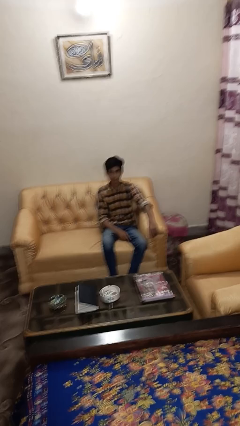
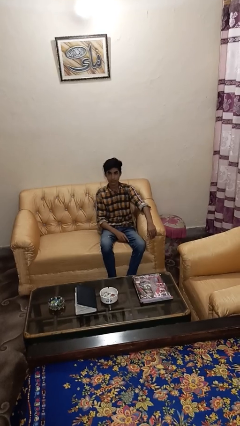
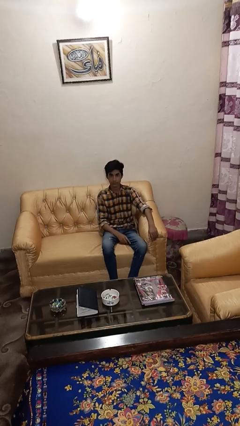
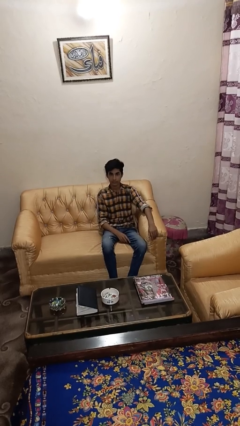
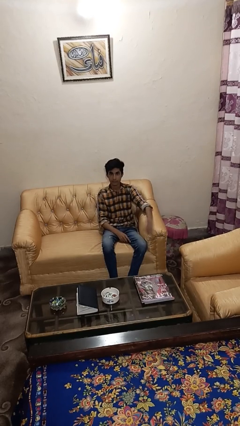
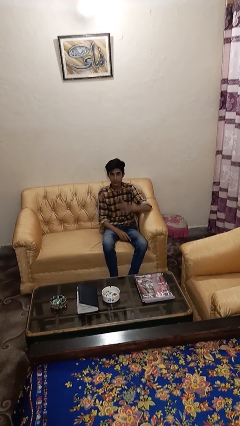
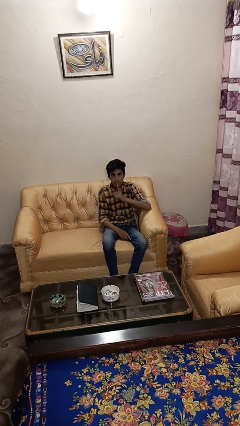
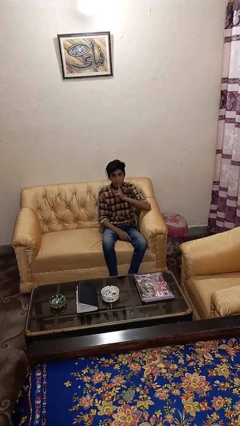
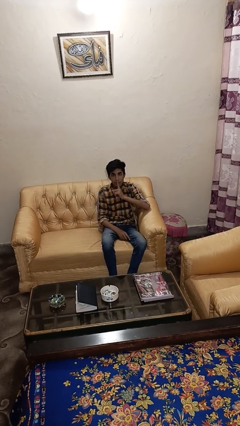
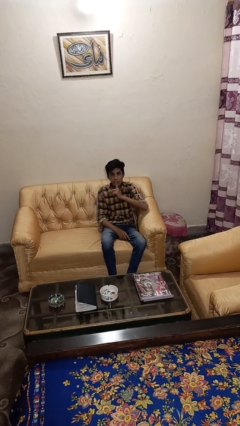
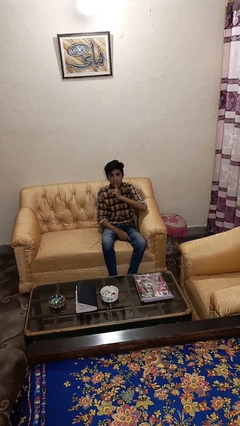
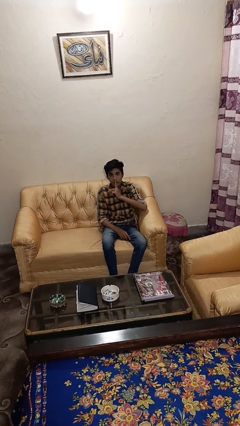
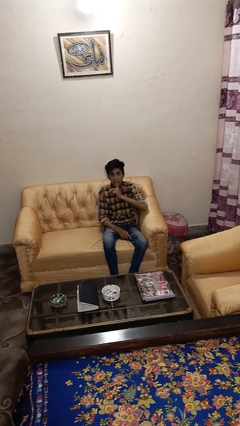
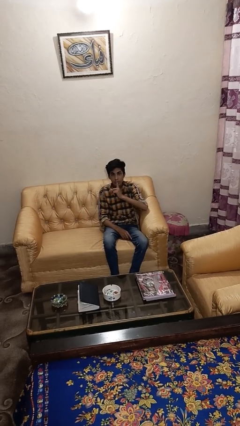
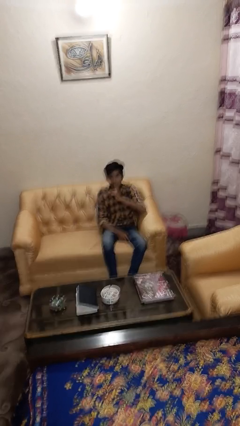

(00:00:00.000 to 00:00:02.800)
person gestures be quiet

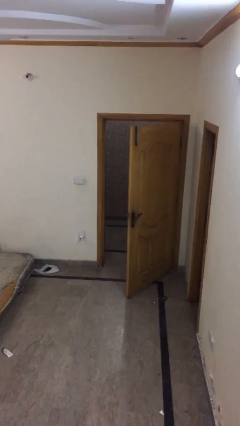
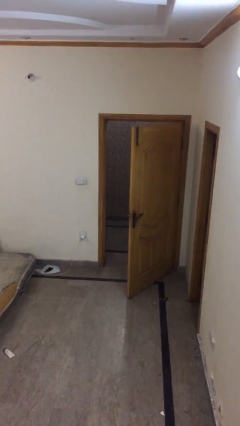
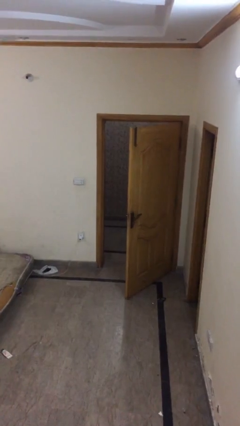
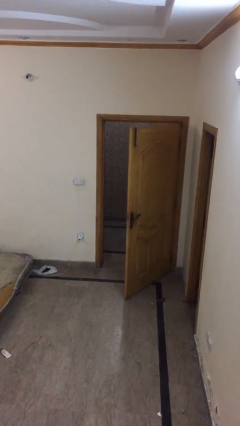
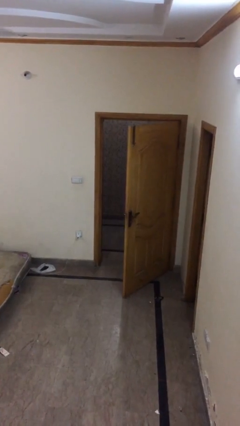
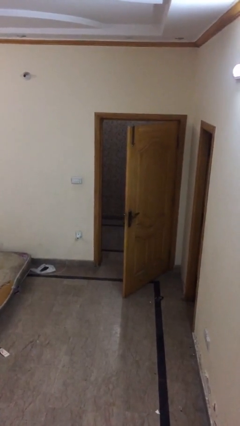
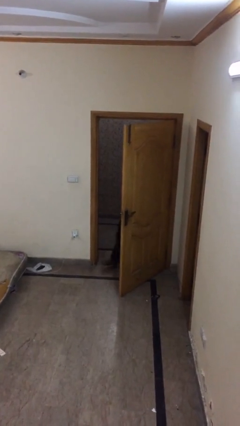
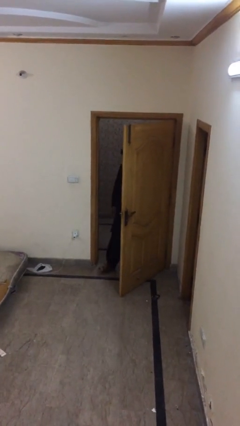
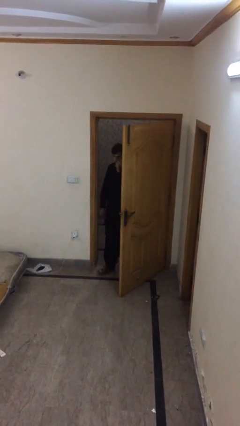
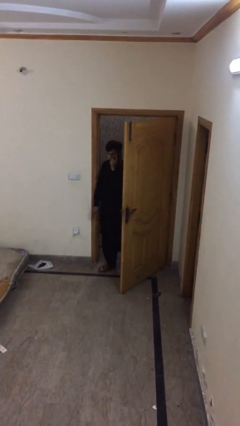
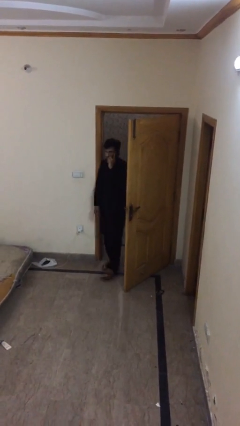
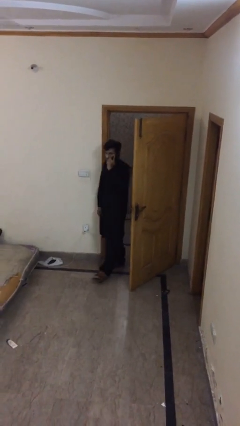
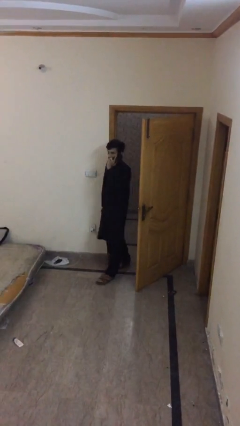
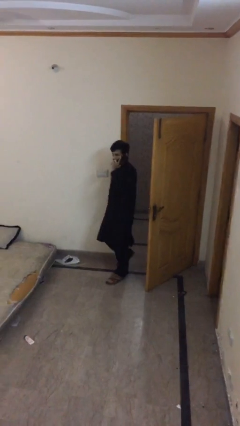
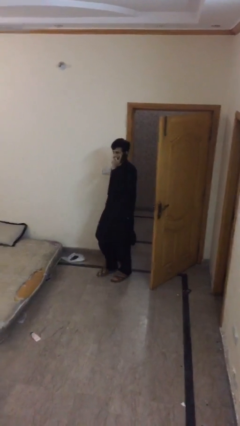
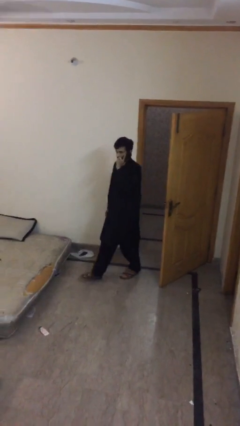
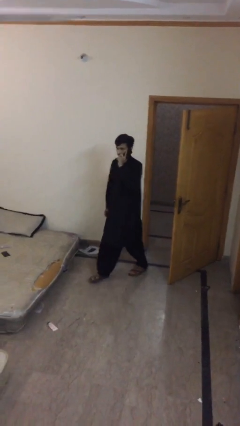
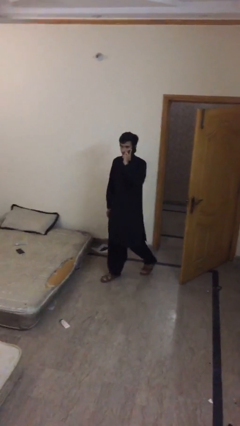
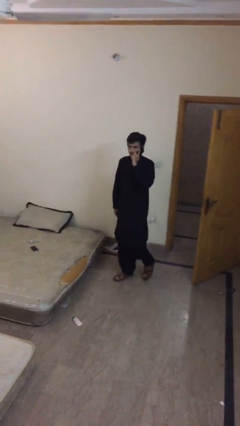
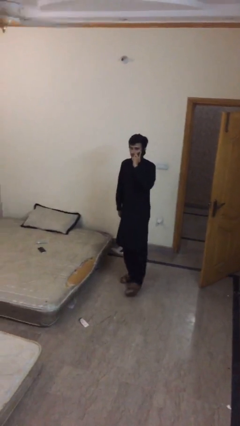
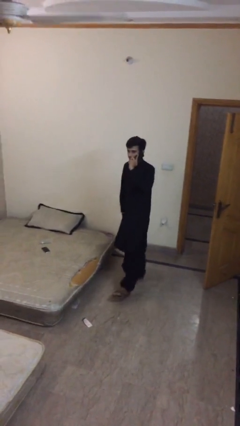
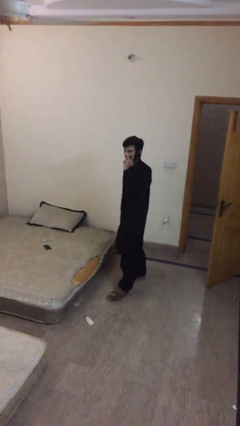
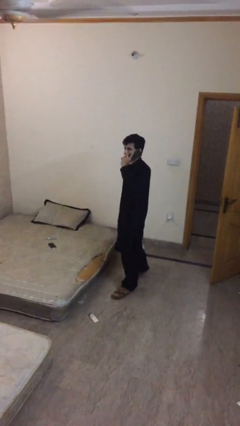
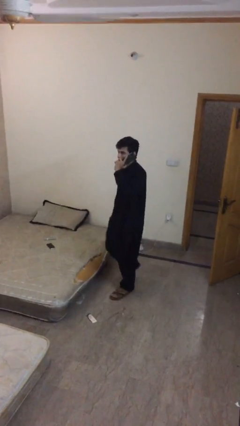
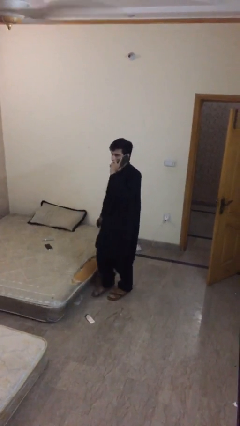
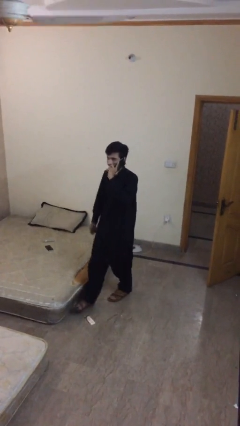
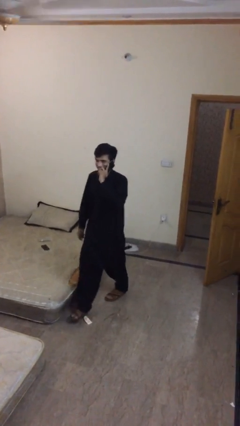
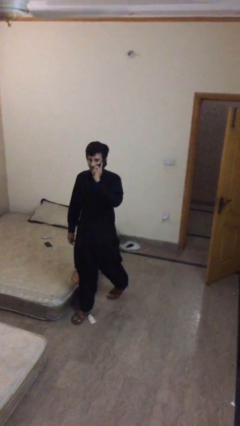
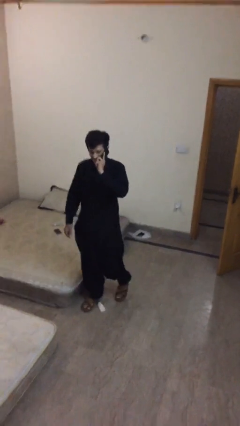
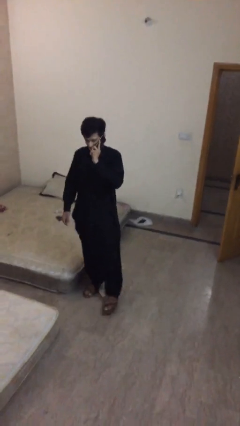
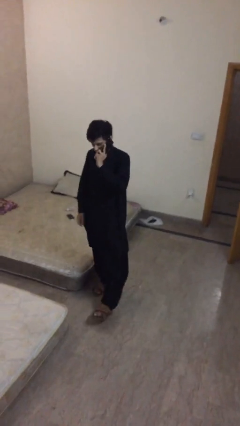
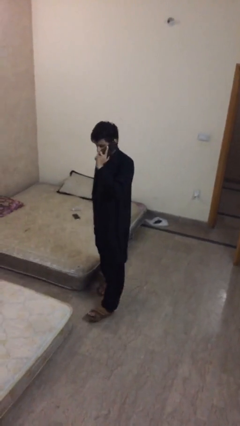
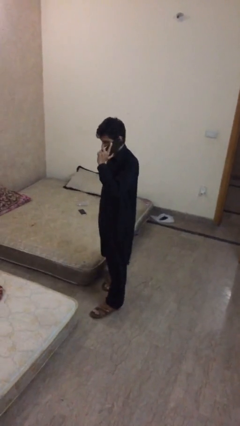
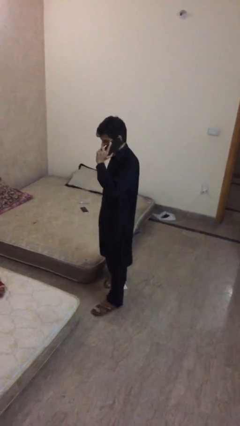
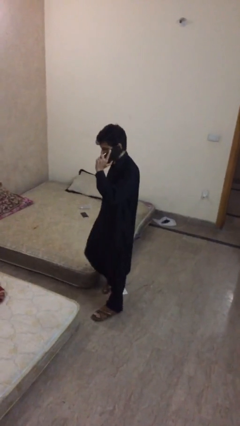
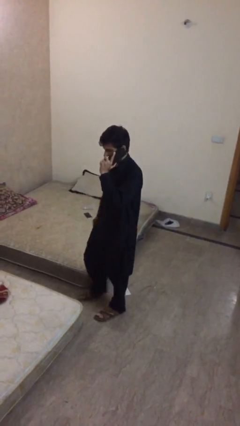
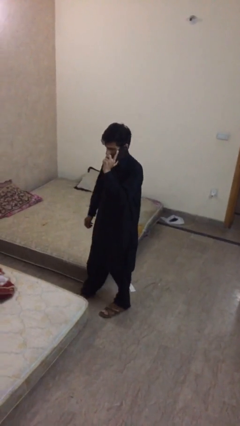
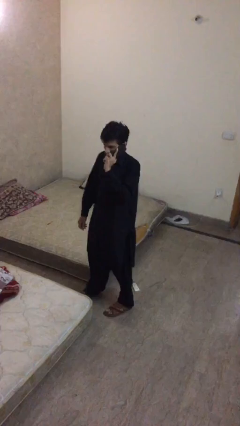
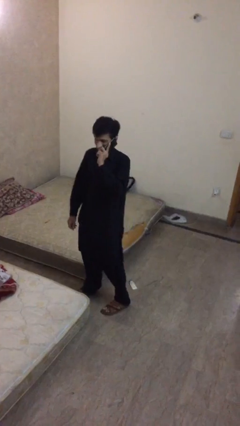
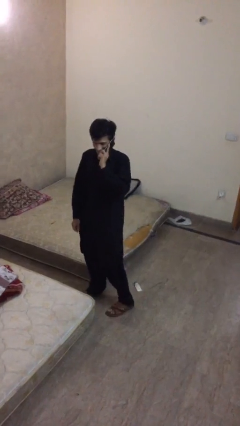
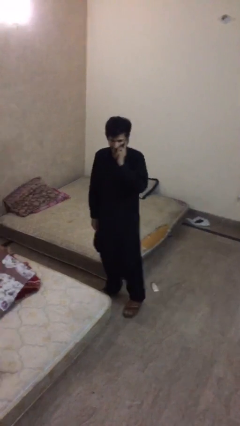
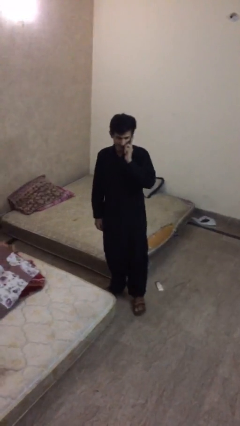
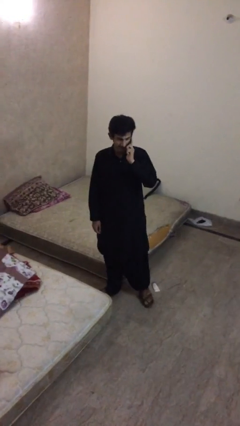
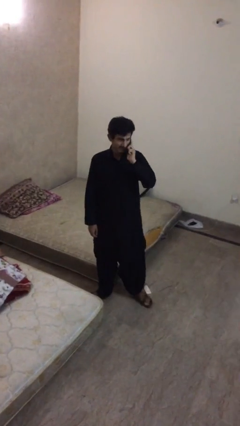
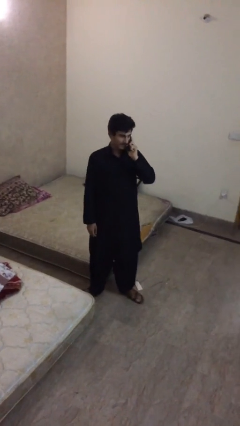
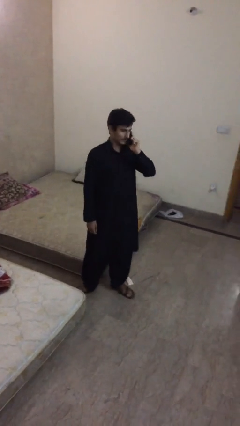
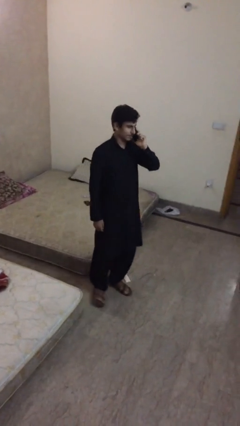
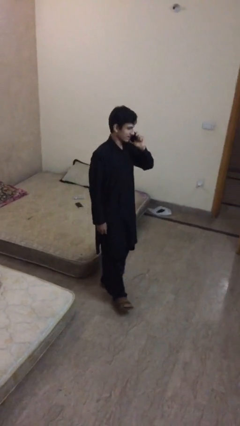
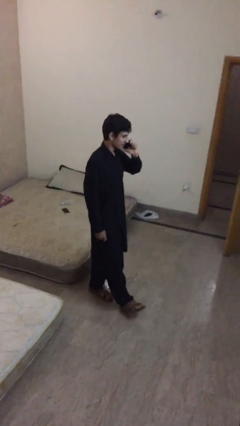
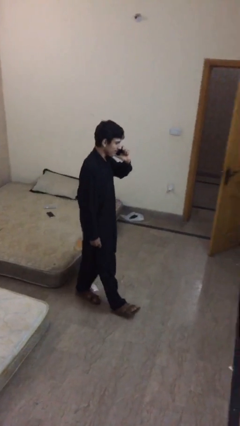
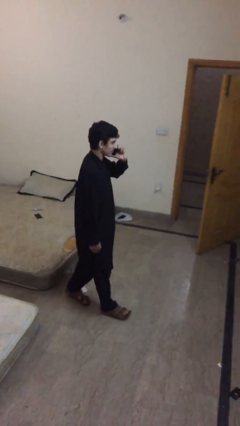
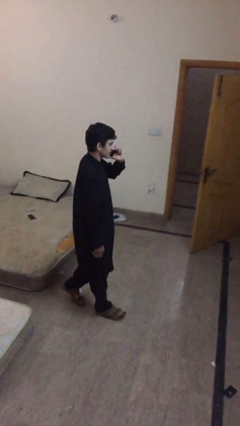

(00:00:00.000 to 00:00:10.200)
person enters scene through structure

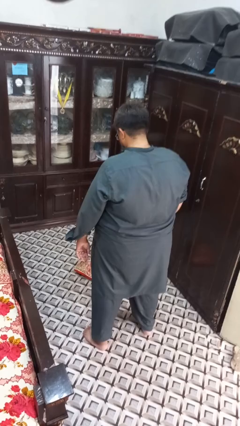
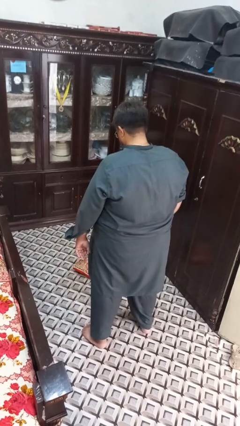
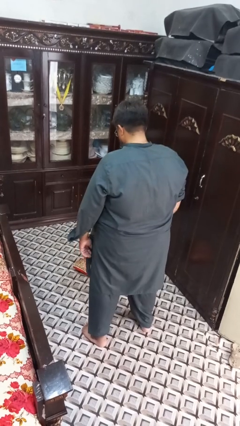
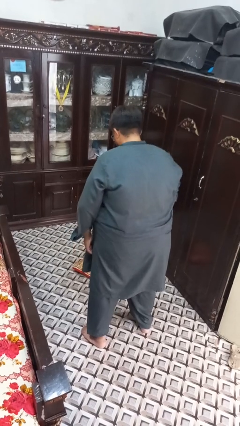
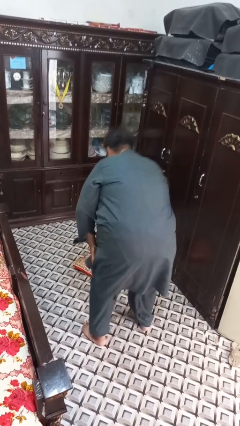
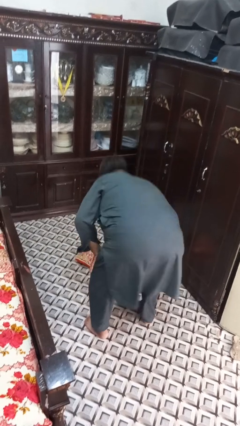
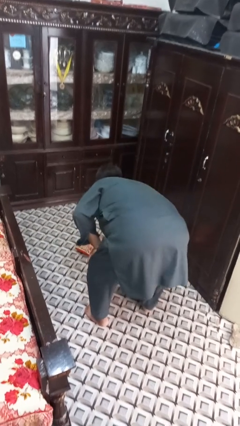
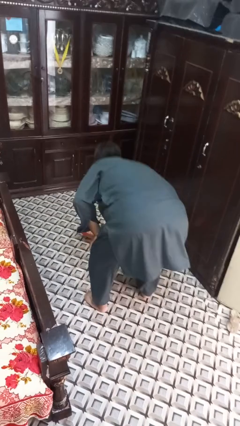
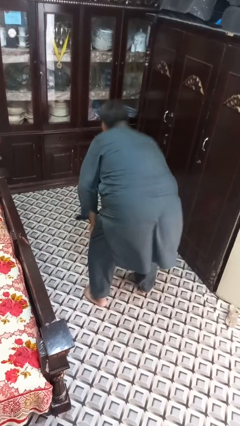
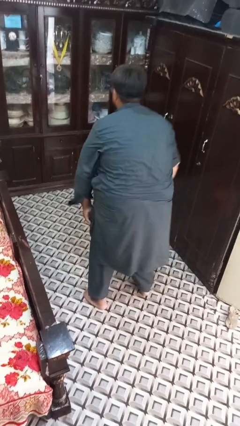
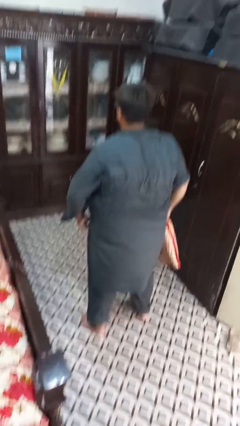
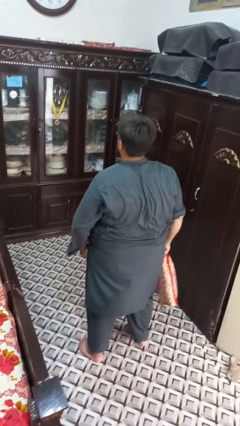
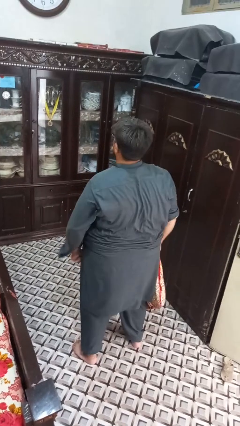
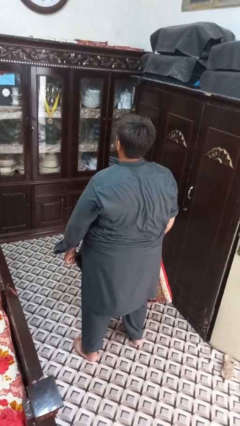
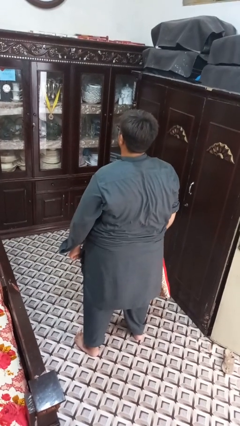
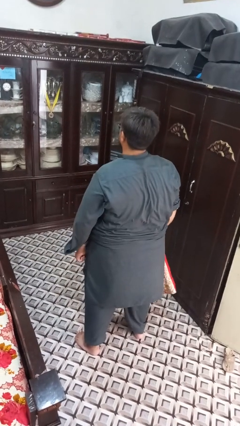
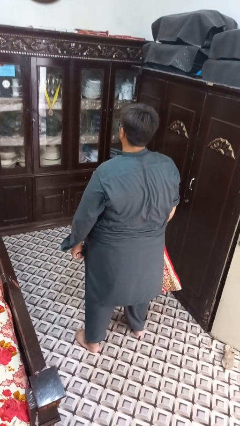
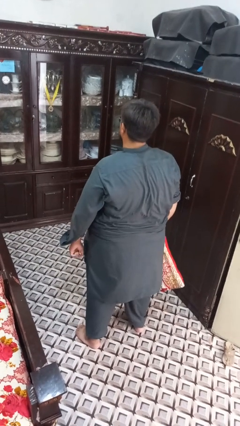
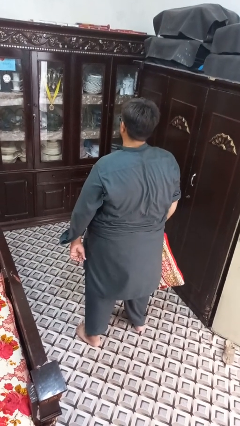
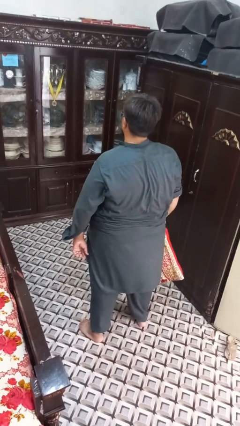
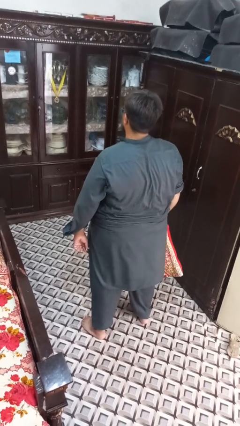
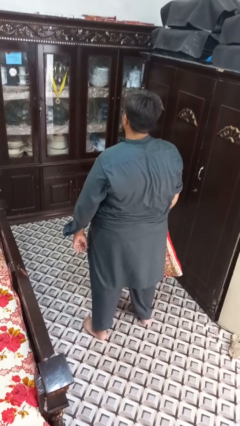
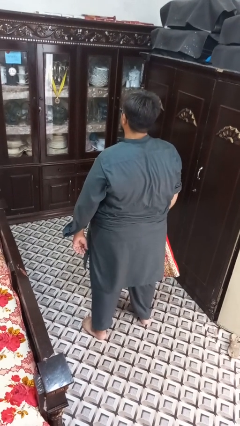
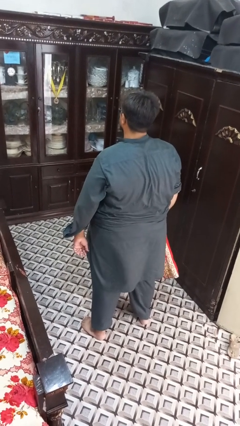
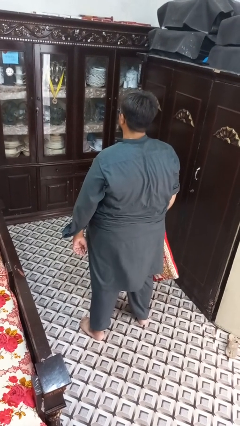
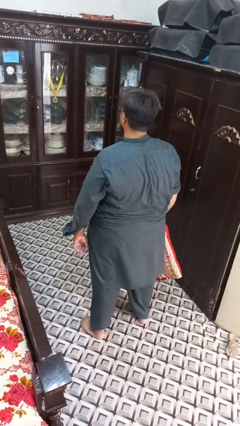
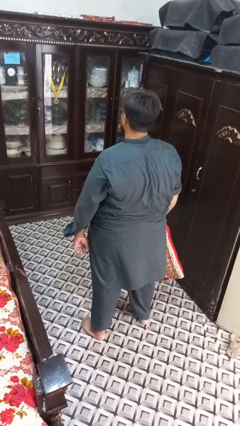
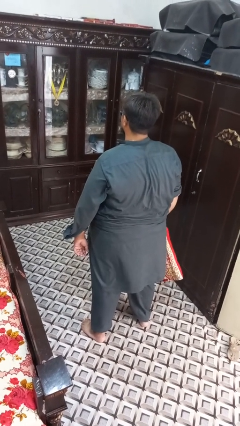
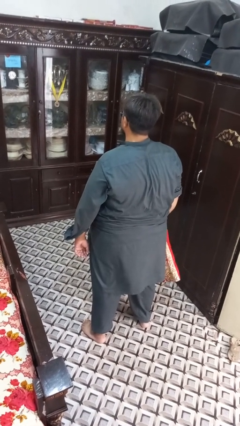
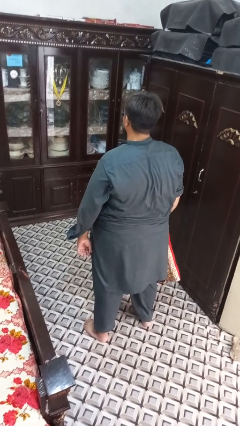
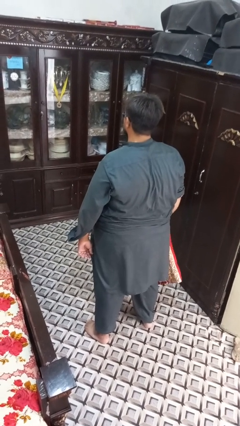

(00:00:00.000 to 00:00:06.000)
person picks up object from floor
